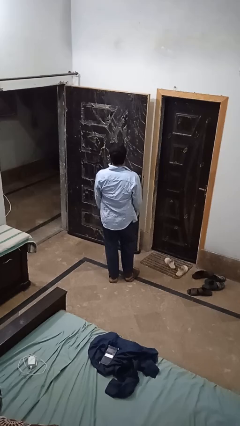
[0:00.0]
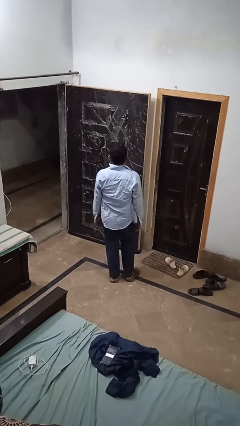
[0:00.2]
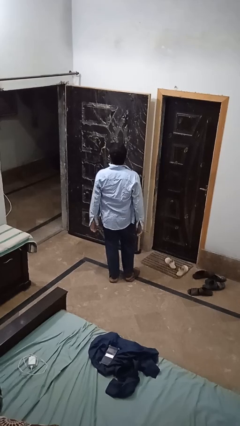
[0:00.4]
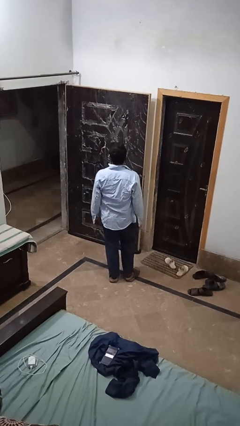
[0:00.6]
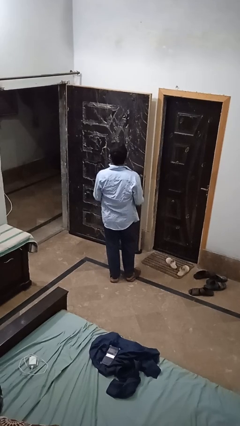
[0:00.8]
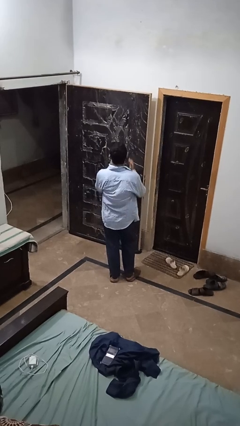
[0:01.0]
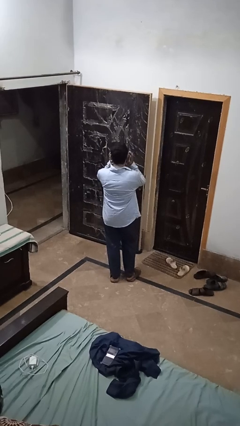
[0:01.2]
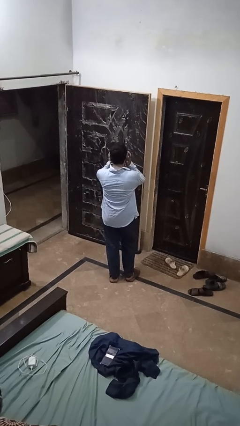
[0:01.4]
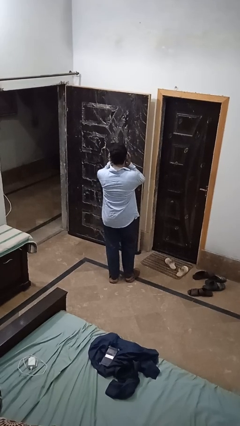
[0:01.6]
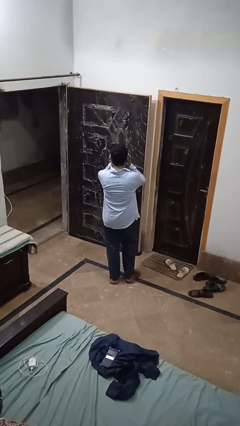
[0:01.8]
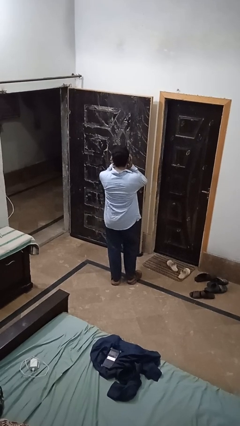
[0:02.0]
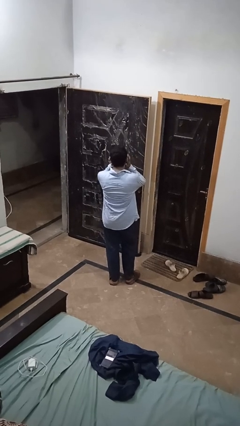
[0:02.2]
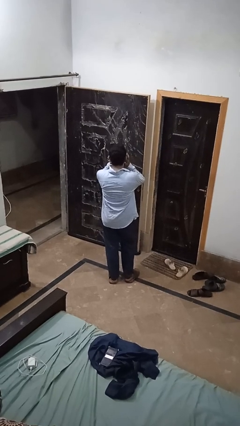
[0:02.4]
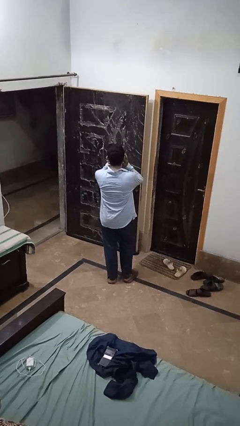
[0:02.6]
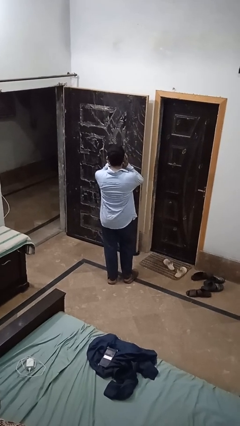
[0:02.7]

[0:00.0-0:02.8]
person puts fingers in ear

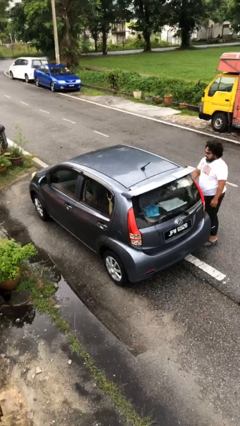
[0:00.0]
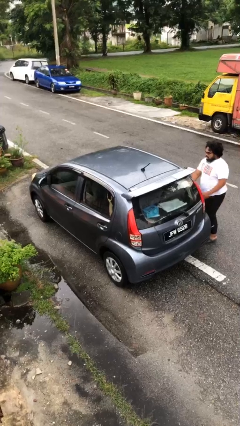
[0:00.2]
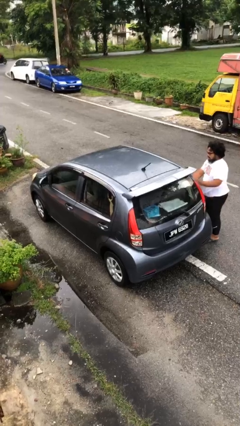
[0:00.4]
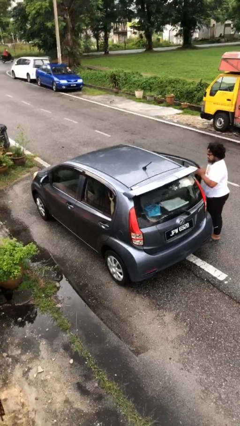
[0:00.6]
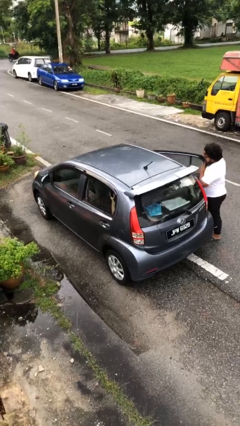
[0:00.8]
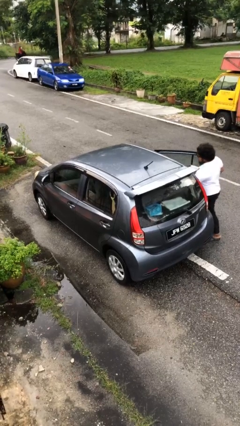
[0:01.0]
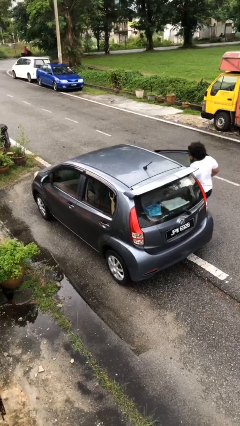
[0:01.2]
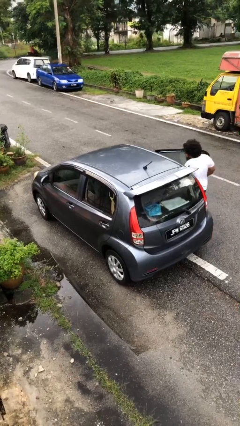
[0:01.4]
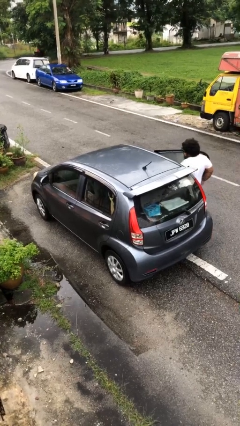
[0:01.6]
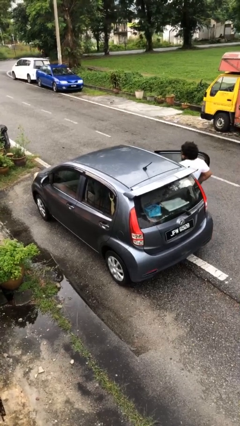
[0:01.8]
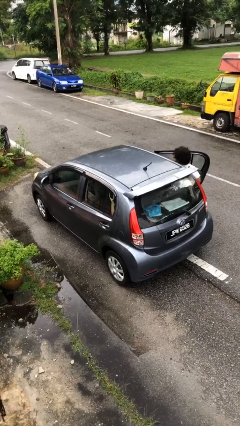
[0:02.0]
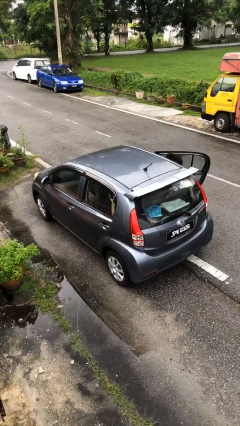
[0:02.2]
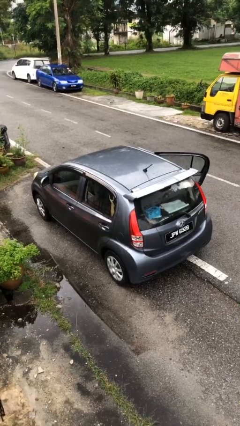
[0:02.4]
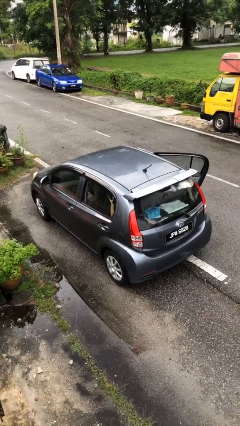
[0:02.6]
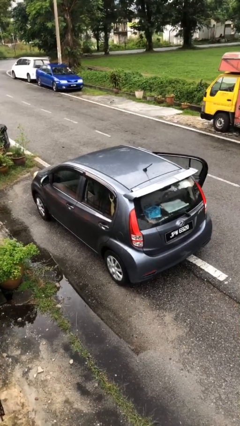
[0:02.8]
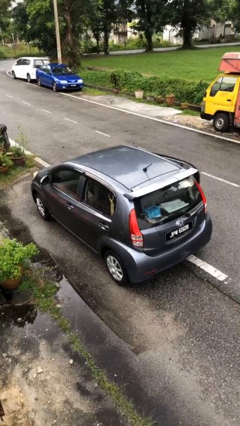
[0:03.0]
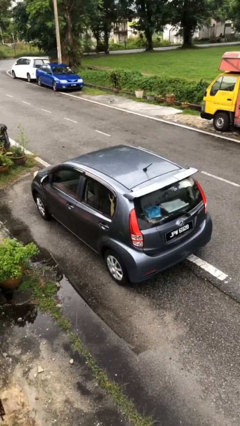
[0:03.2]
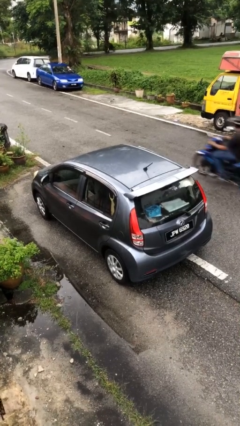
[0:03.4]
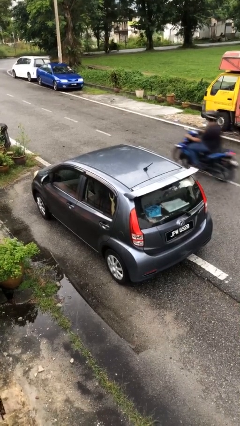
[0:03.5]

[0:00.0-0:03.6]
car picks up person

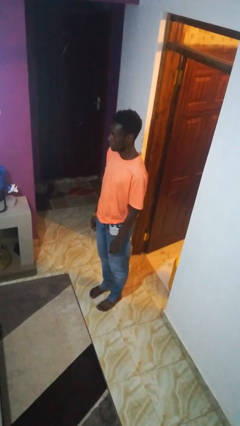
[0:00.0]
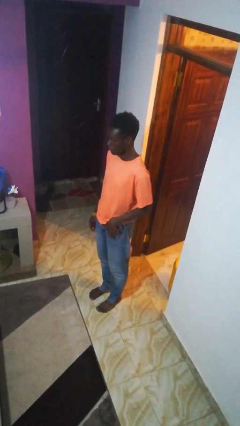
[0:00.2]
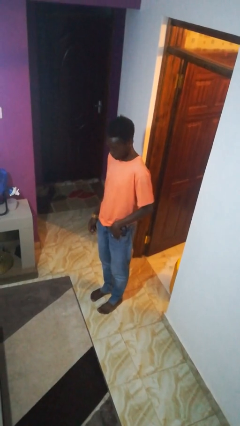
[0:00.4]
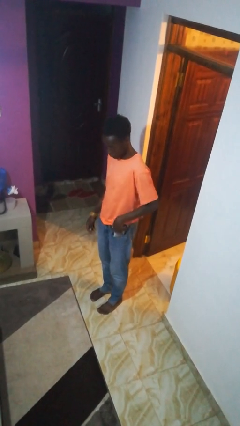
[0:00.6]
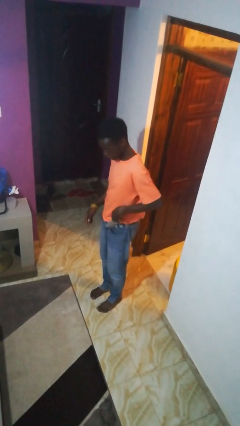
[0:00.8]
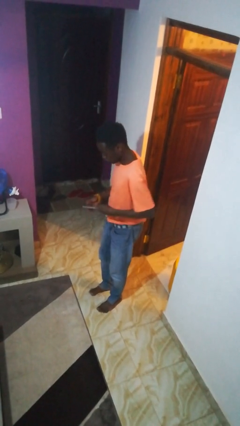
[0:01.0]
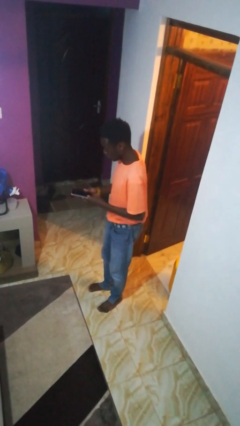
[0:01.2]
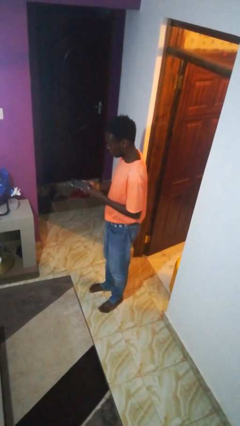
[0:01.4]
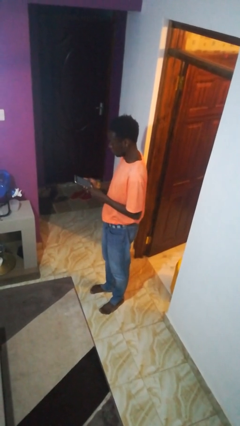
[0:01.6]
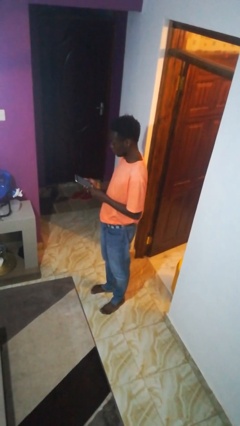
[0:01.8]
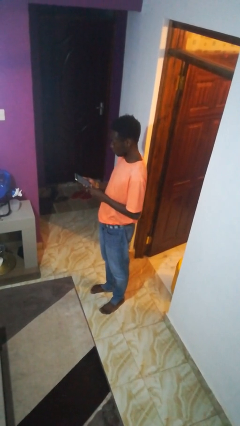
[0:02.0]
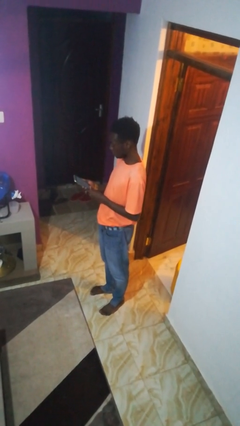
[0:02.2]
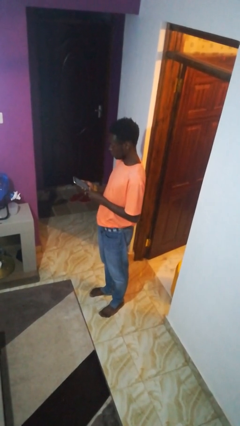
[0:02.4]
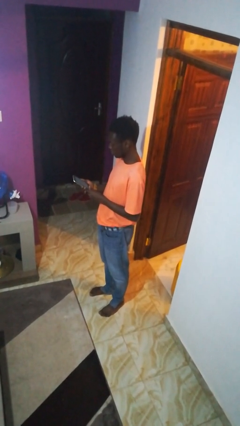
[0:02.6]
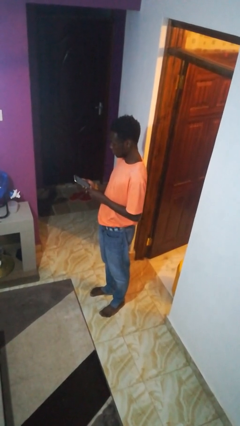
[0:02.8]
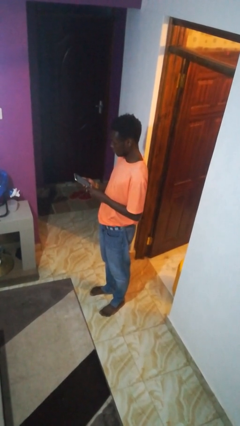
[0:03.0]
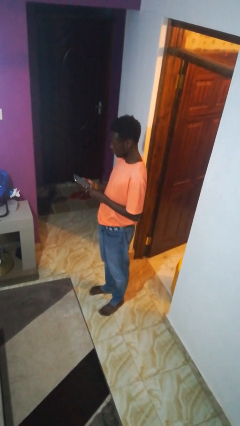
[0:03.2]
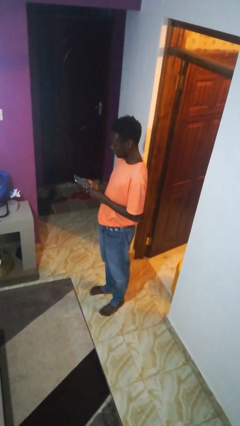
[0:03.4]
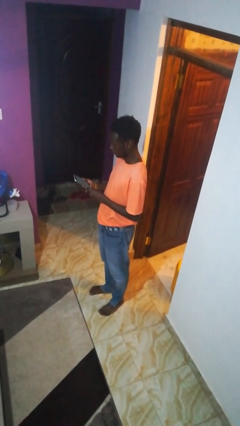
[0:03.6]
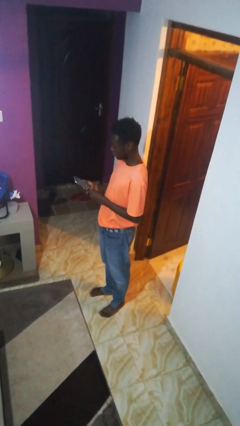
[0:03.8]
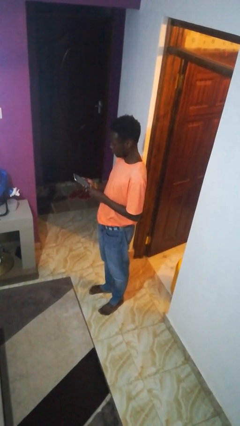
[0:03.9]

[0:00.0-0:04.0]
person takes phone from pocket

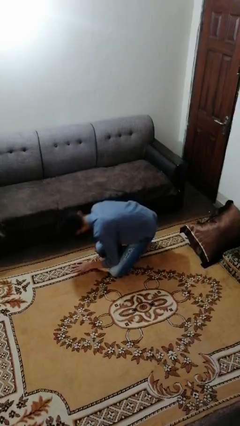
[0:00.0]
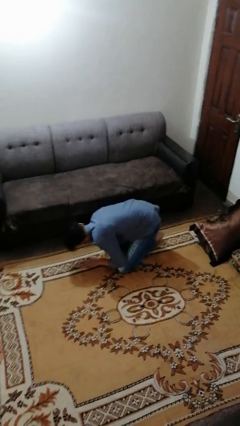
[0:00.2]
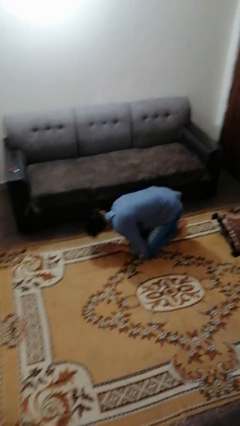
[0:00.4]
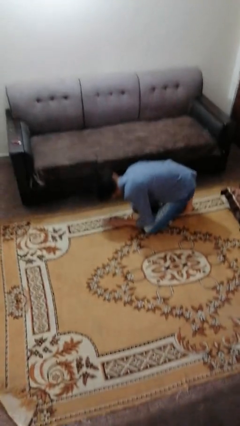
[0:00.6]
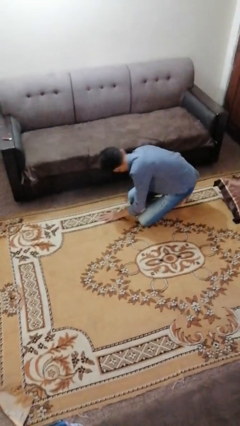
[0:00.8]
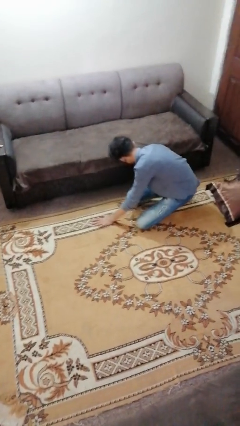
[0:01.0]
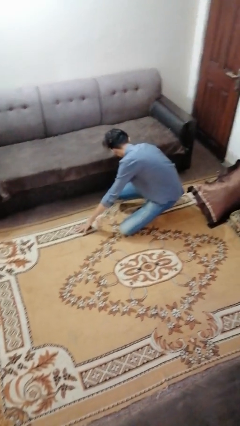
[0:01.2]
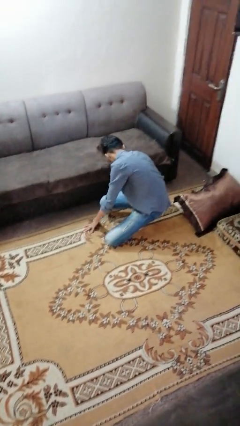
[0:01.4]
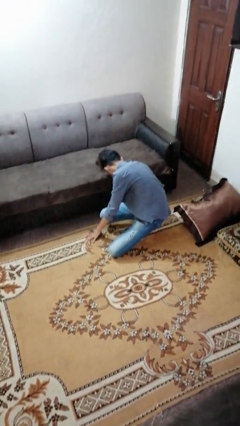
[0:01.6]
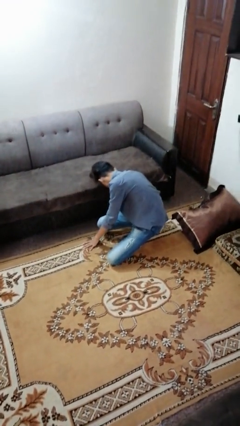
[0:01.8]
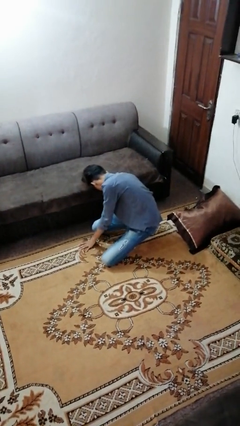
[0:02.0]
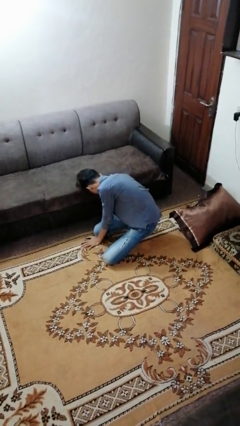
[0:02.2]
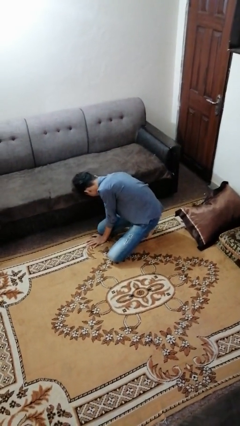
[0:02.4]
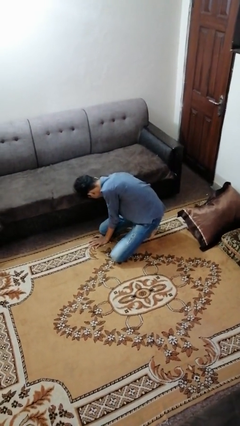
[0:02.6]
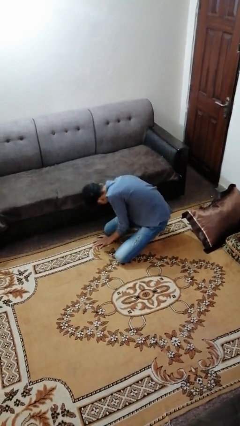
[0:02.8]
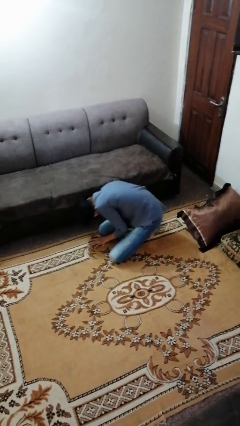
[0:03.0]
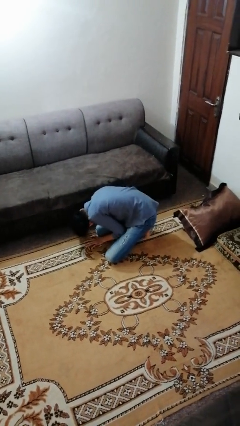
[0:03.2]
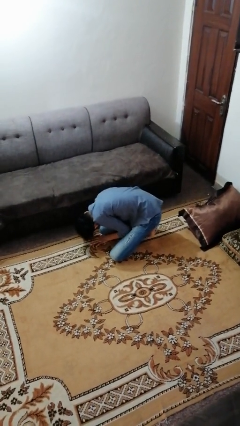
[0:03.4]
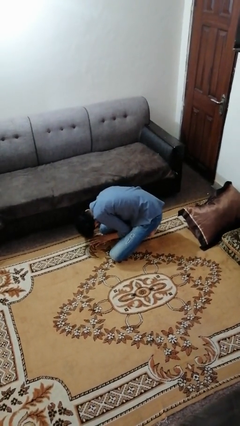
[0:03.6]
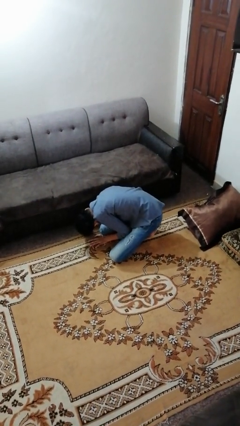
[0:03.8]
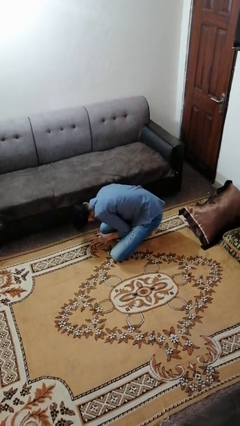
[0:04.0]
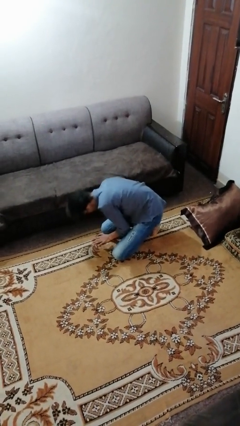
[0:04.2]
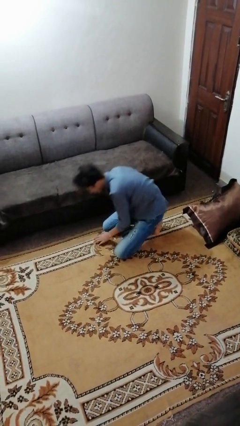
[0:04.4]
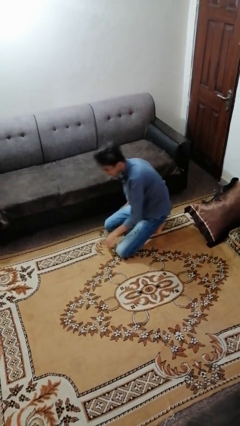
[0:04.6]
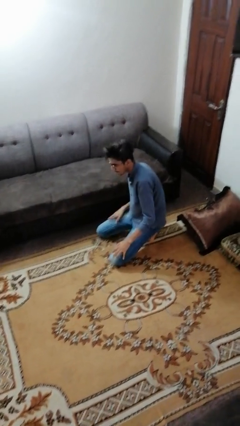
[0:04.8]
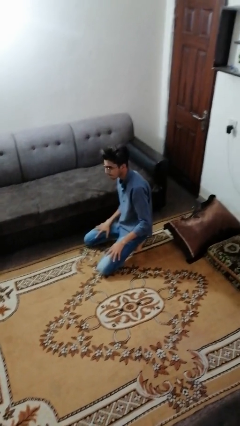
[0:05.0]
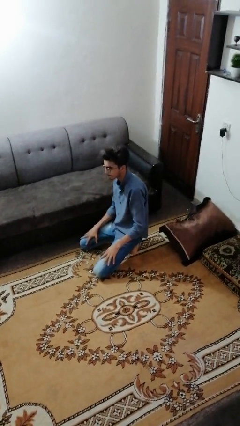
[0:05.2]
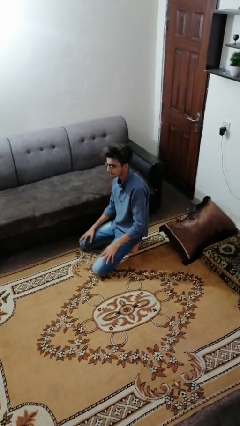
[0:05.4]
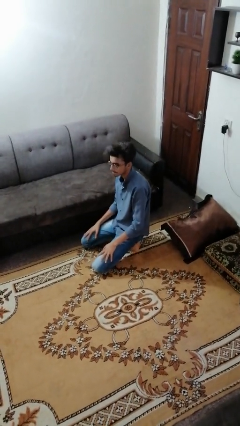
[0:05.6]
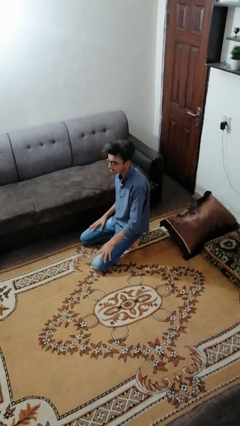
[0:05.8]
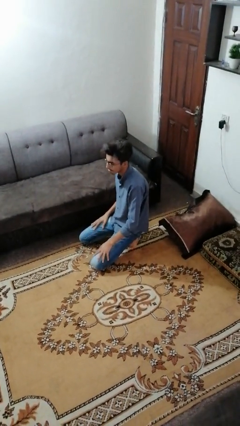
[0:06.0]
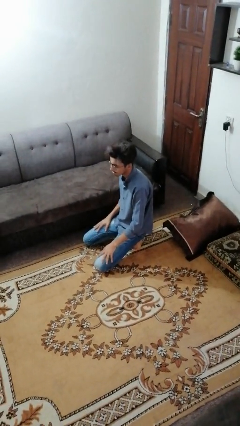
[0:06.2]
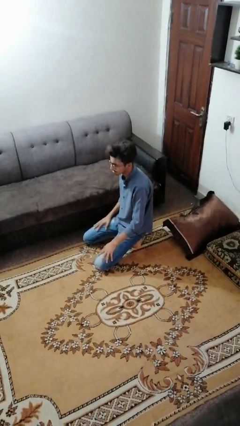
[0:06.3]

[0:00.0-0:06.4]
person searches under couch

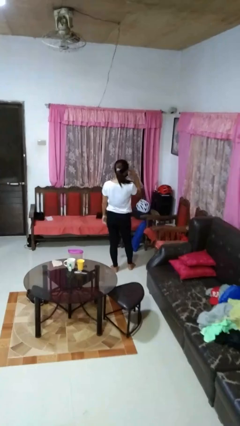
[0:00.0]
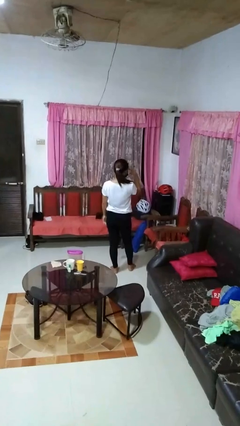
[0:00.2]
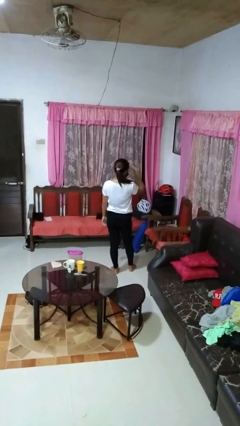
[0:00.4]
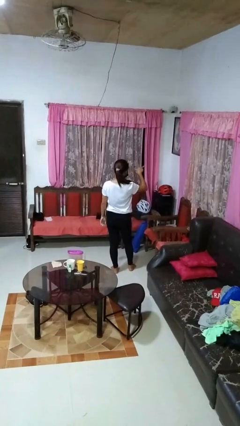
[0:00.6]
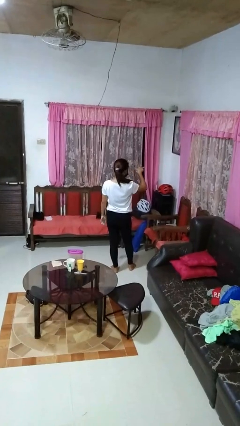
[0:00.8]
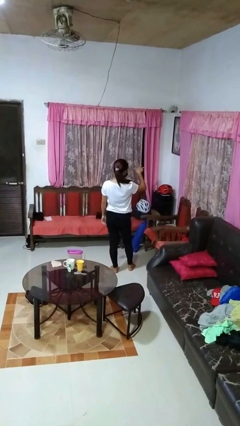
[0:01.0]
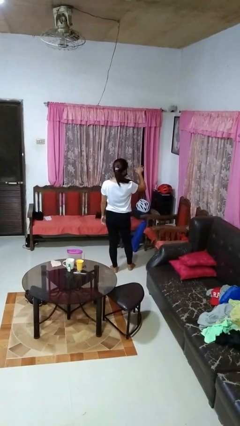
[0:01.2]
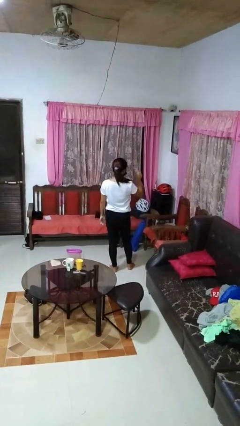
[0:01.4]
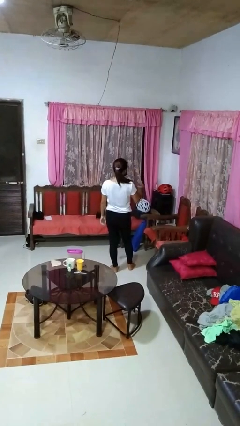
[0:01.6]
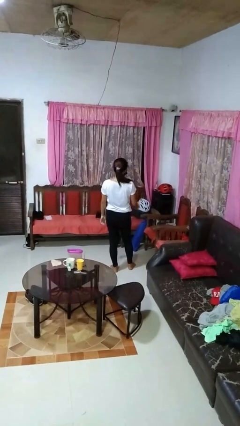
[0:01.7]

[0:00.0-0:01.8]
person gestures watch closely
